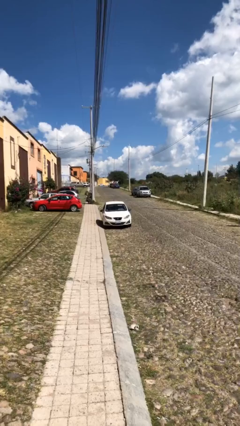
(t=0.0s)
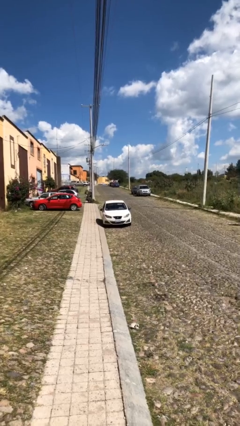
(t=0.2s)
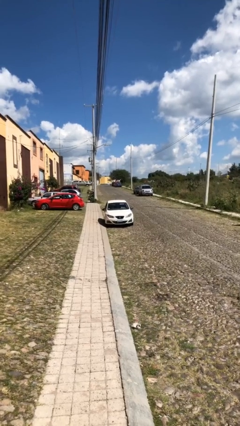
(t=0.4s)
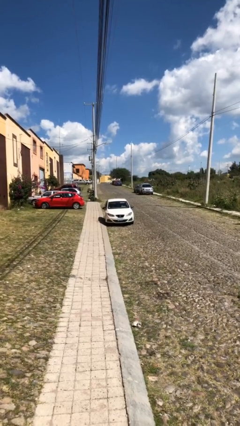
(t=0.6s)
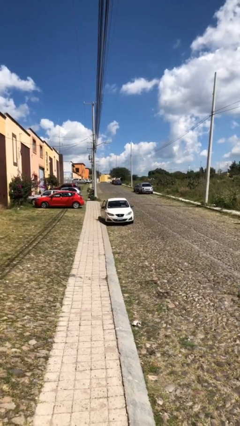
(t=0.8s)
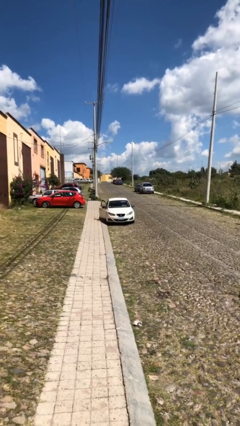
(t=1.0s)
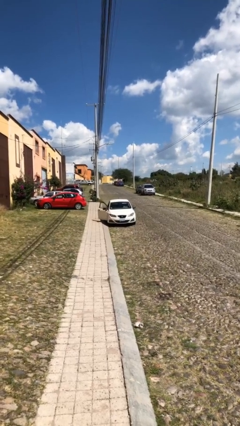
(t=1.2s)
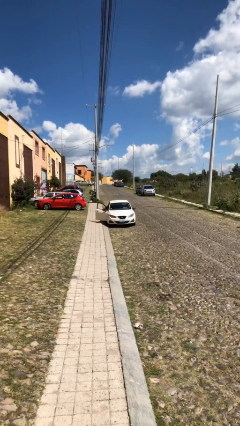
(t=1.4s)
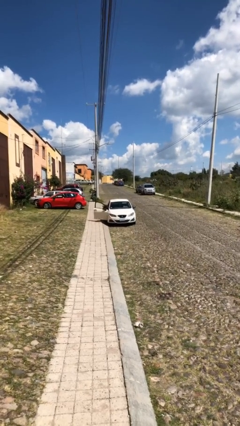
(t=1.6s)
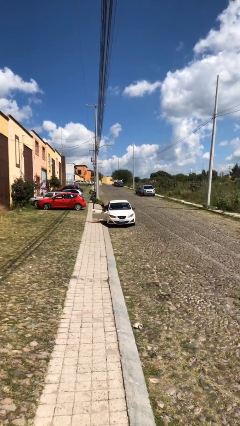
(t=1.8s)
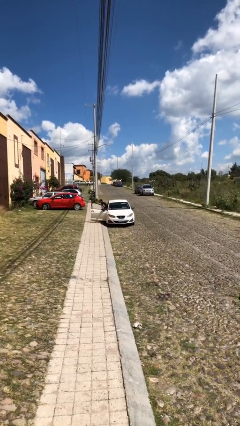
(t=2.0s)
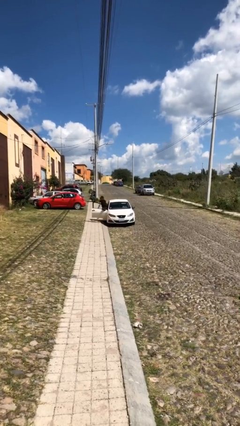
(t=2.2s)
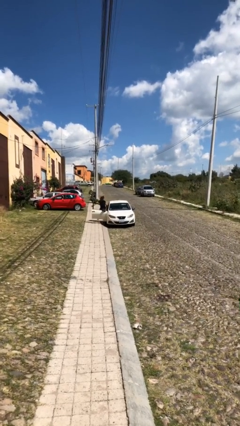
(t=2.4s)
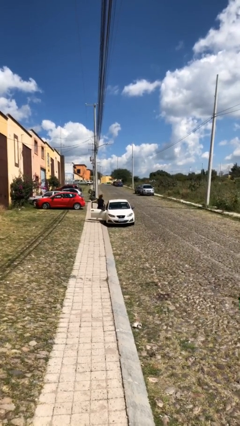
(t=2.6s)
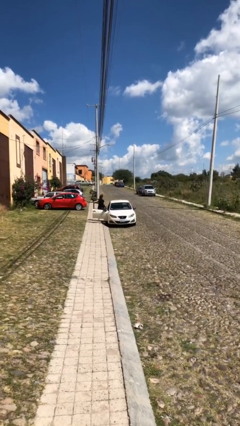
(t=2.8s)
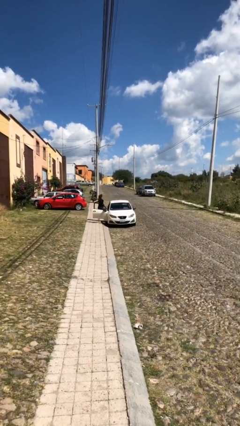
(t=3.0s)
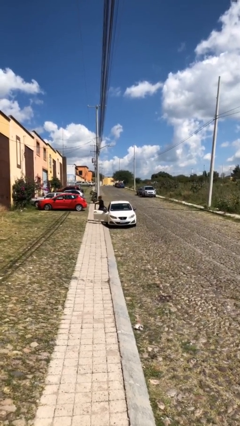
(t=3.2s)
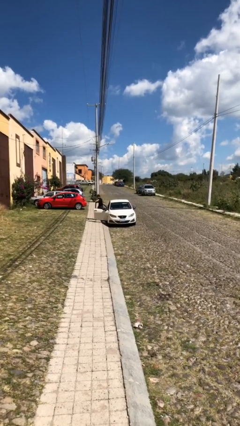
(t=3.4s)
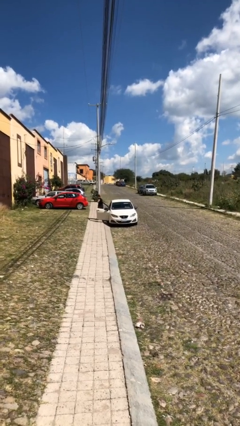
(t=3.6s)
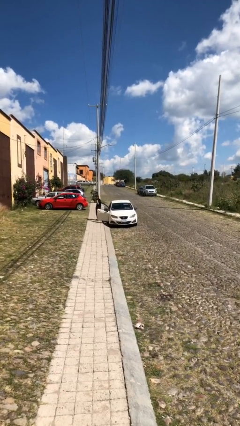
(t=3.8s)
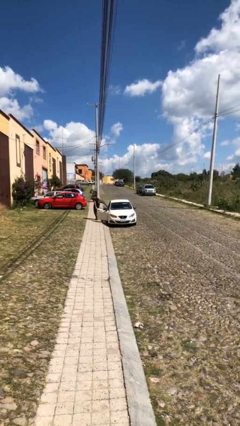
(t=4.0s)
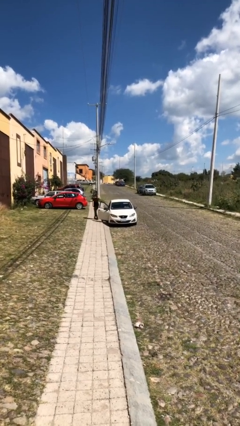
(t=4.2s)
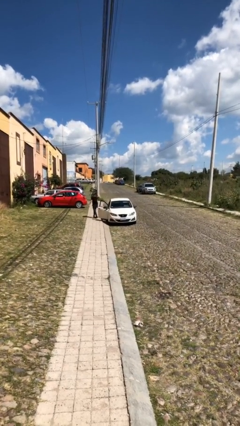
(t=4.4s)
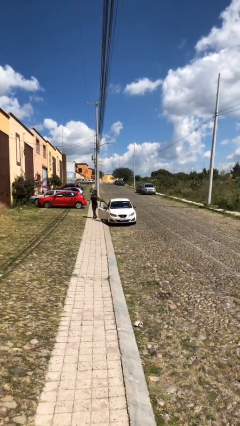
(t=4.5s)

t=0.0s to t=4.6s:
car drops off person

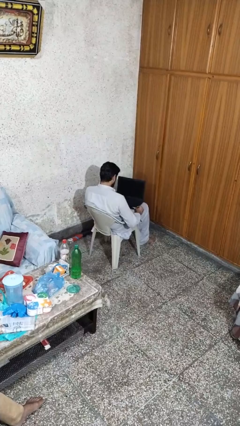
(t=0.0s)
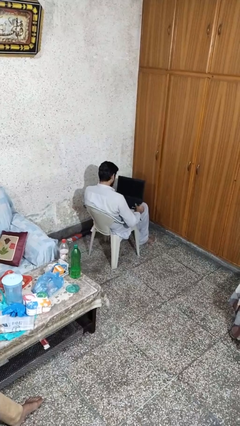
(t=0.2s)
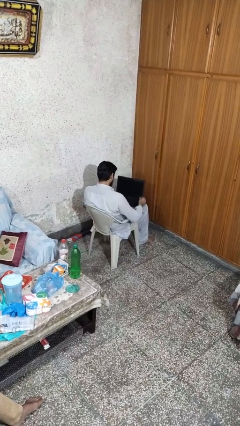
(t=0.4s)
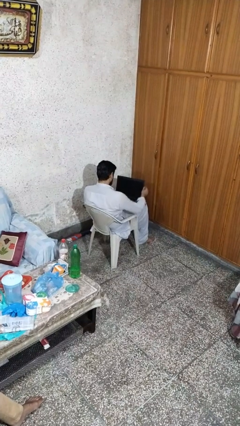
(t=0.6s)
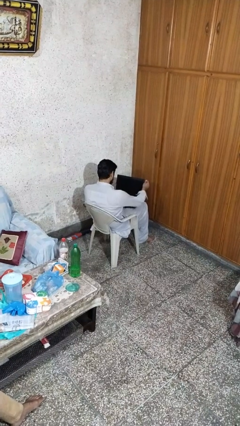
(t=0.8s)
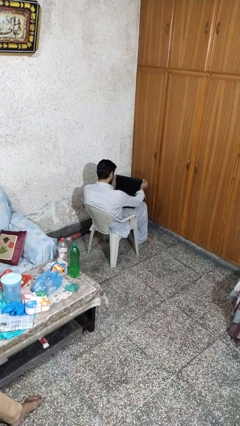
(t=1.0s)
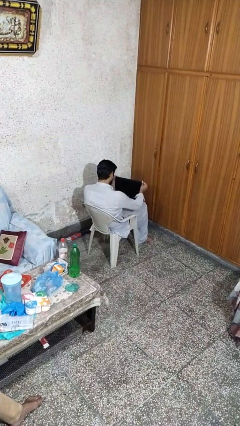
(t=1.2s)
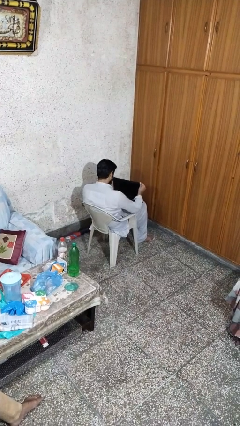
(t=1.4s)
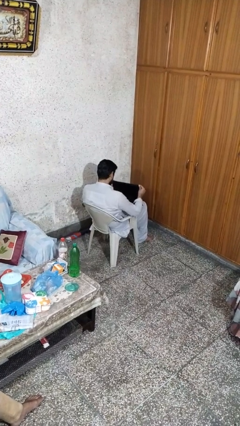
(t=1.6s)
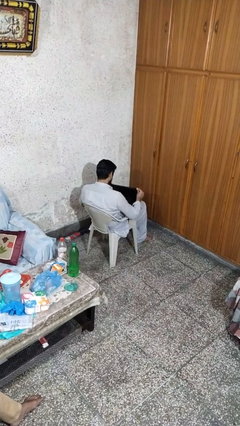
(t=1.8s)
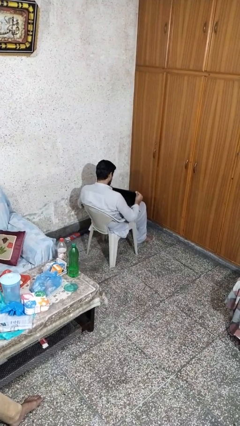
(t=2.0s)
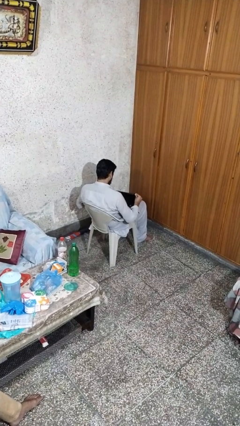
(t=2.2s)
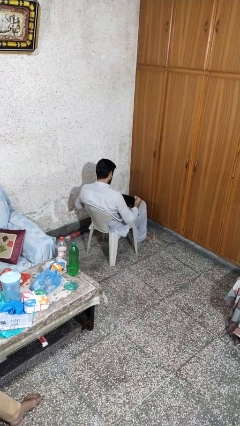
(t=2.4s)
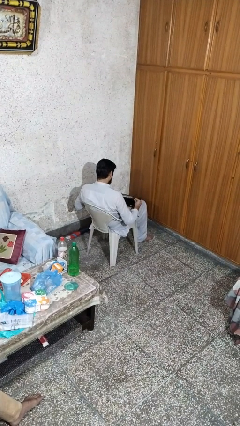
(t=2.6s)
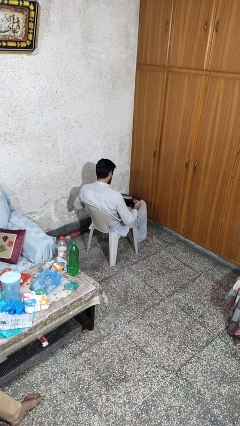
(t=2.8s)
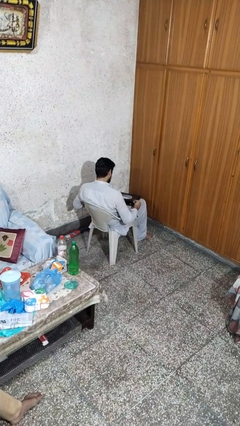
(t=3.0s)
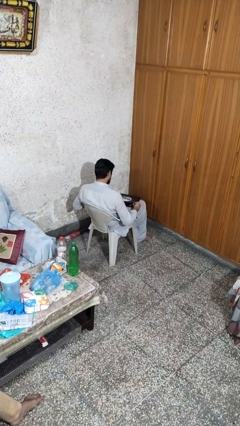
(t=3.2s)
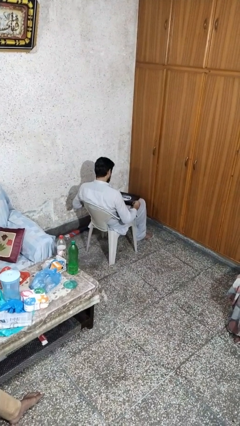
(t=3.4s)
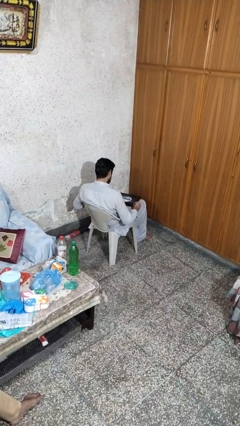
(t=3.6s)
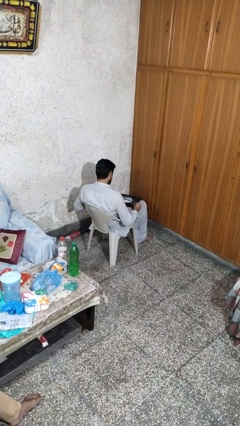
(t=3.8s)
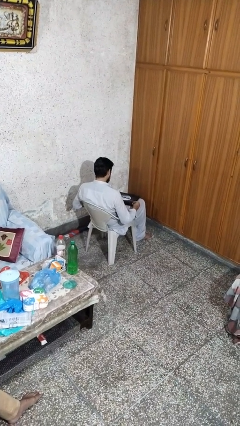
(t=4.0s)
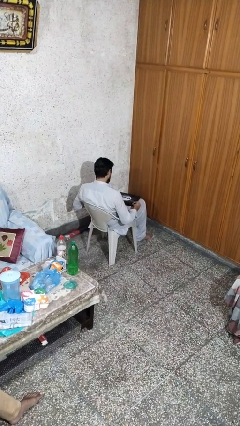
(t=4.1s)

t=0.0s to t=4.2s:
person closes laptop

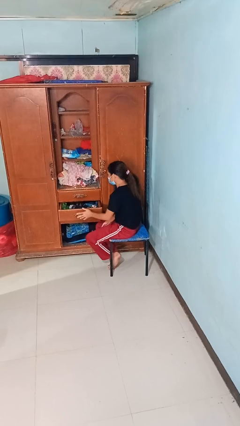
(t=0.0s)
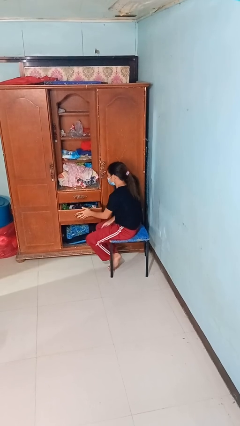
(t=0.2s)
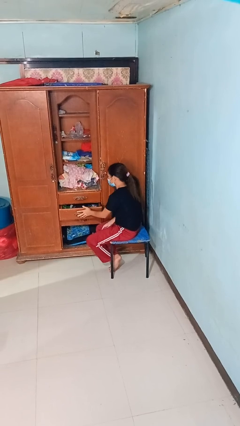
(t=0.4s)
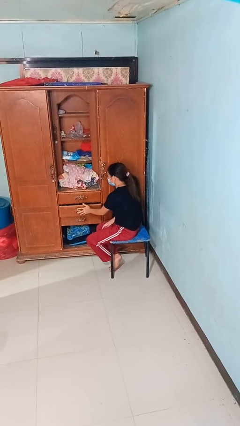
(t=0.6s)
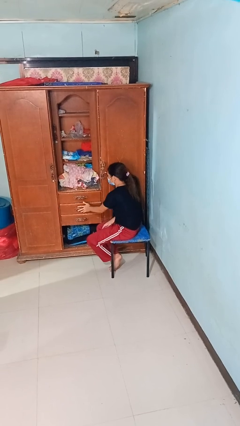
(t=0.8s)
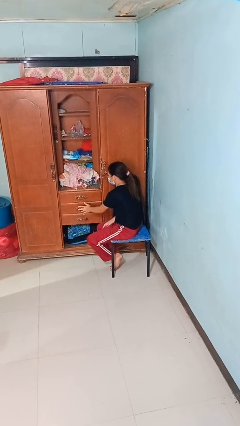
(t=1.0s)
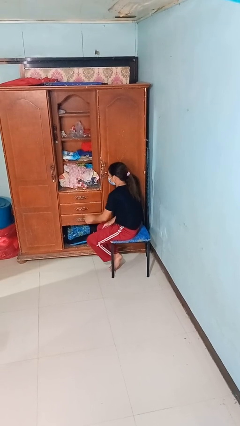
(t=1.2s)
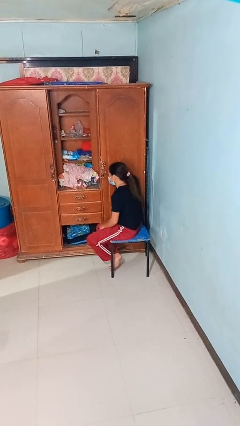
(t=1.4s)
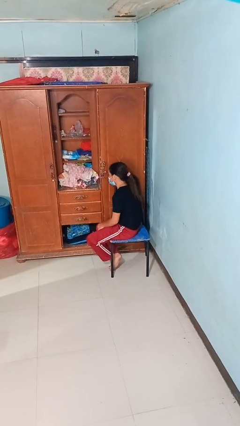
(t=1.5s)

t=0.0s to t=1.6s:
person closes dresser drawer

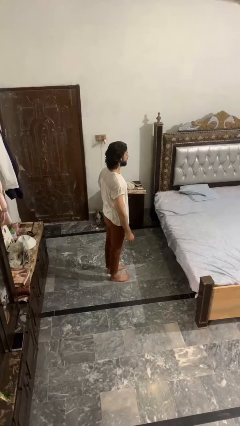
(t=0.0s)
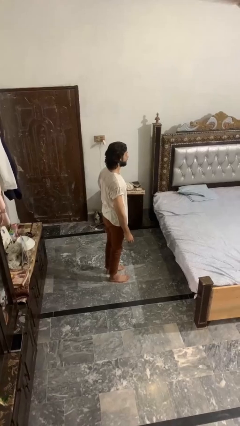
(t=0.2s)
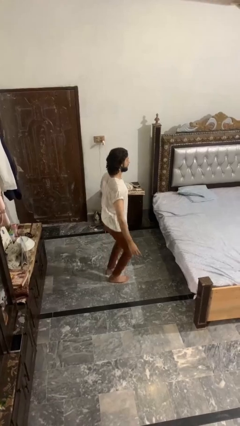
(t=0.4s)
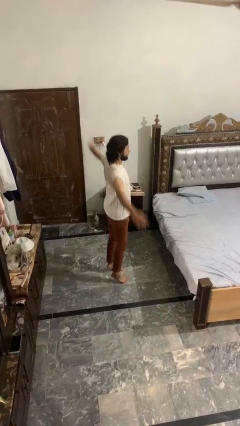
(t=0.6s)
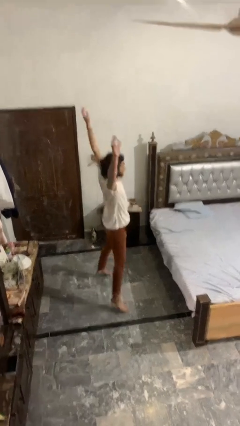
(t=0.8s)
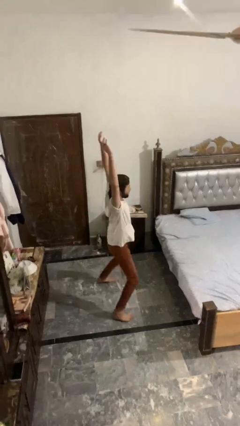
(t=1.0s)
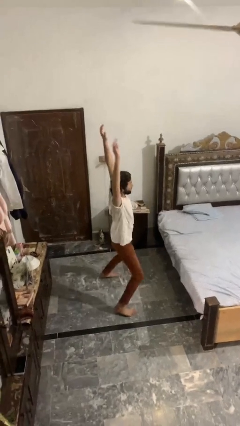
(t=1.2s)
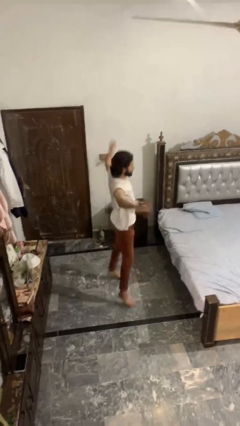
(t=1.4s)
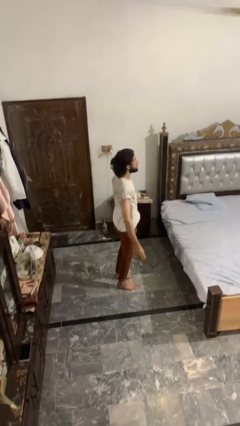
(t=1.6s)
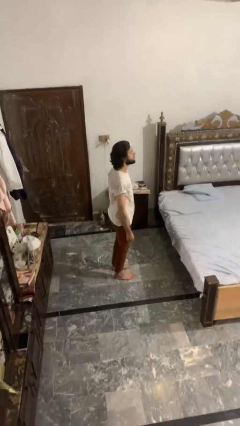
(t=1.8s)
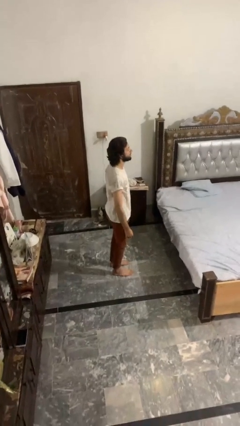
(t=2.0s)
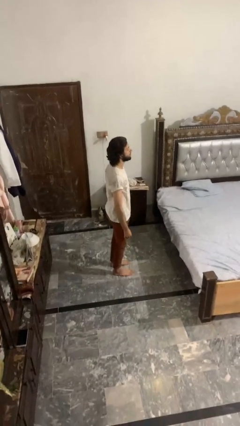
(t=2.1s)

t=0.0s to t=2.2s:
person exercises with jumping jacks

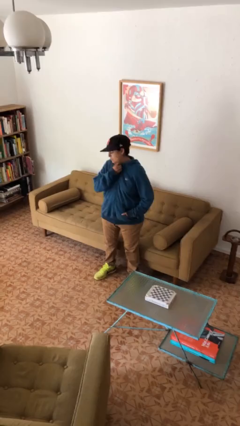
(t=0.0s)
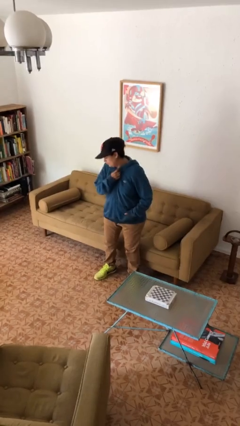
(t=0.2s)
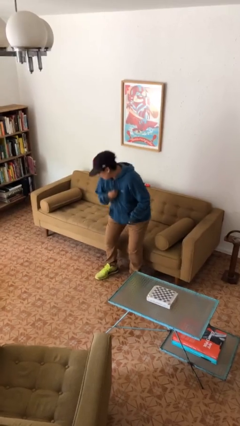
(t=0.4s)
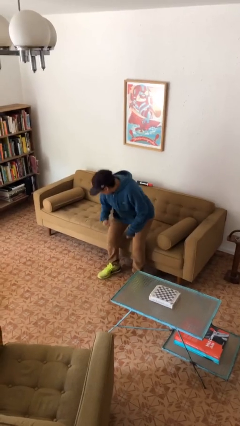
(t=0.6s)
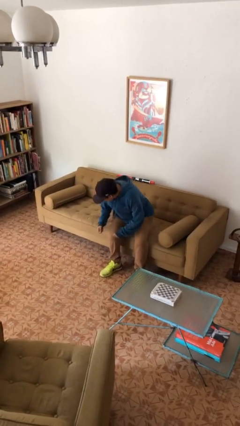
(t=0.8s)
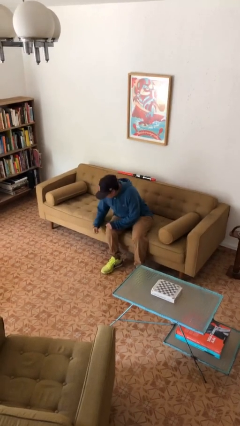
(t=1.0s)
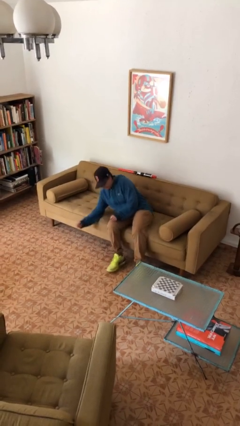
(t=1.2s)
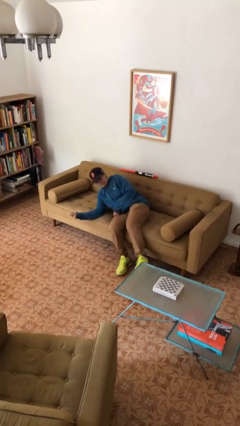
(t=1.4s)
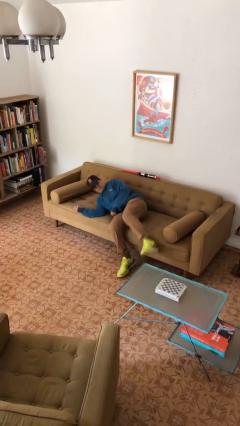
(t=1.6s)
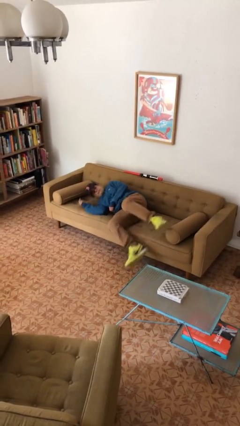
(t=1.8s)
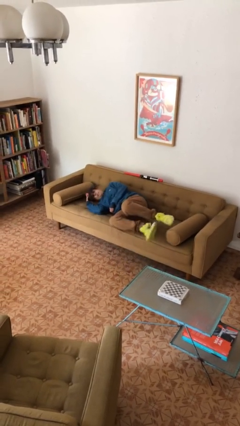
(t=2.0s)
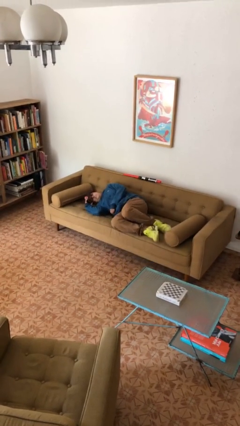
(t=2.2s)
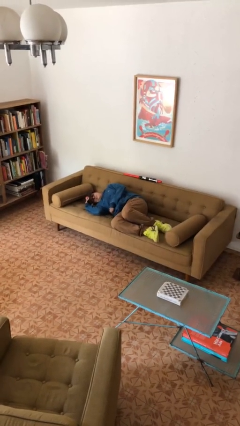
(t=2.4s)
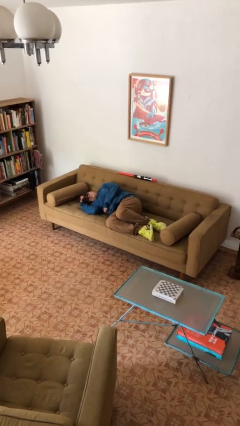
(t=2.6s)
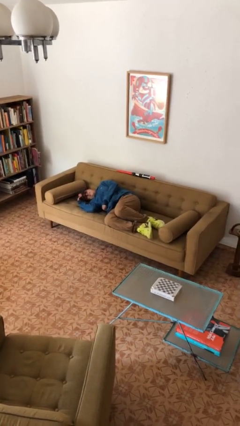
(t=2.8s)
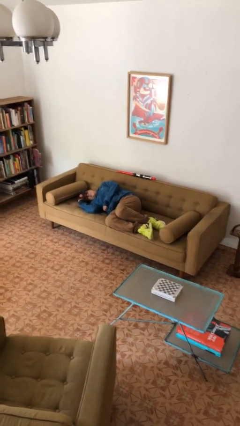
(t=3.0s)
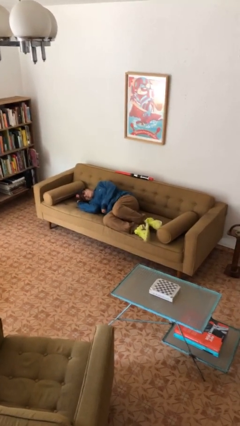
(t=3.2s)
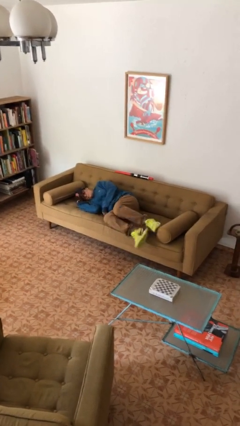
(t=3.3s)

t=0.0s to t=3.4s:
person lies down on couch

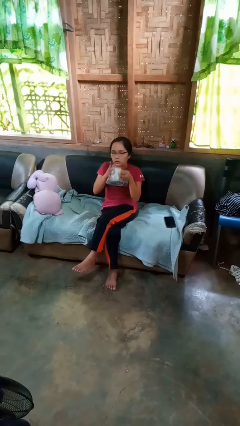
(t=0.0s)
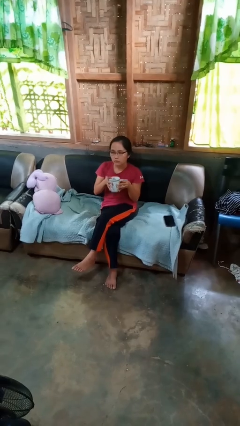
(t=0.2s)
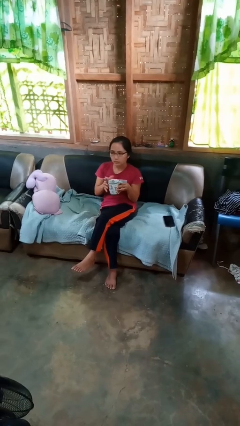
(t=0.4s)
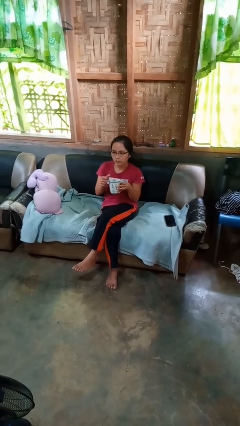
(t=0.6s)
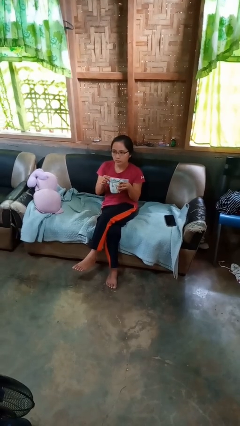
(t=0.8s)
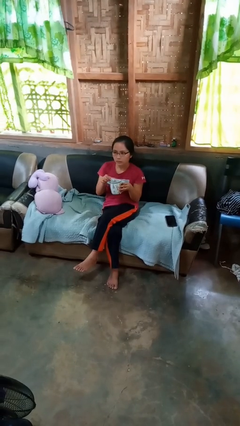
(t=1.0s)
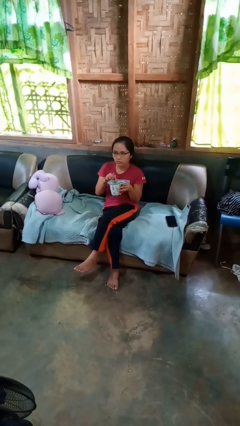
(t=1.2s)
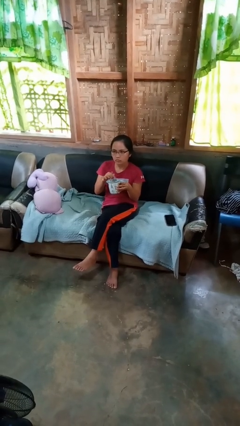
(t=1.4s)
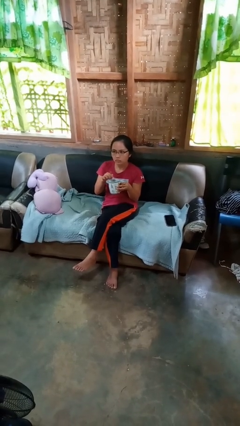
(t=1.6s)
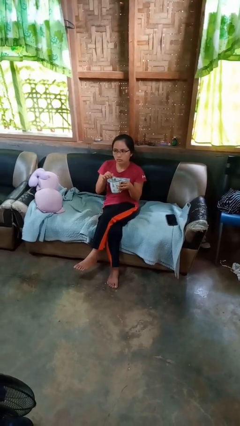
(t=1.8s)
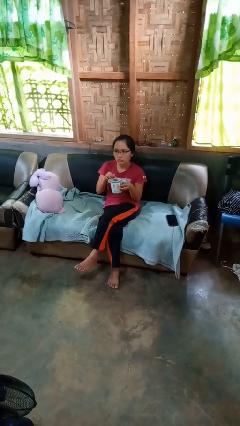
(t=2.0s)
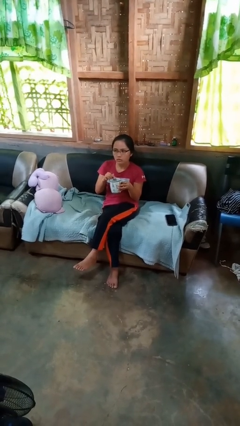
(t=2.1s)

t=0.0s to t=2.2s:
person stirs mug
